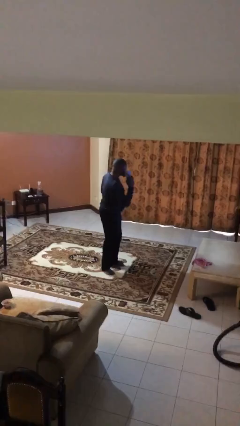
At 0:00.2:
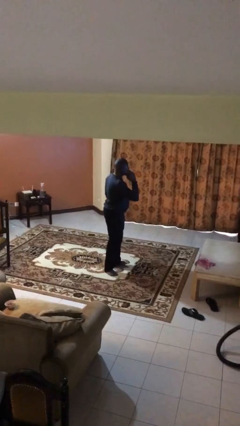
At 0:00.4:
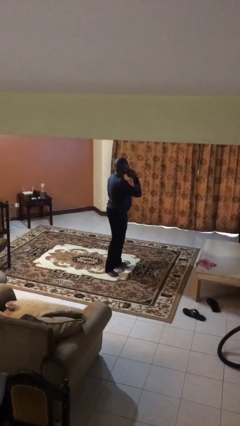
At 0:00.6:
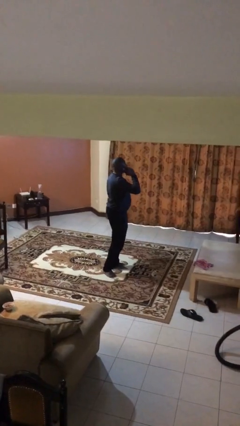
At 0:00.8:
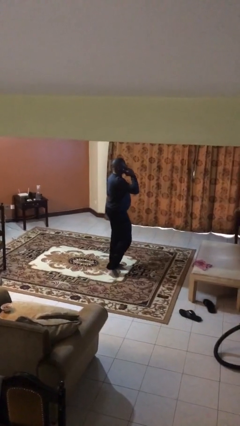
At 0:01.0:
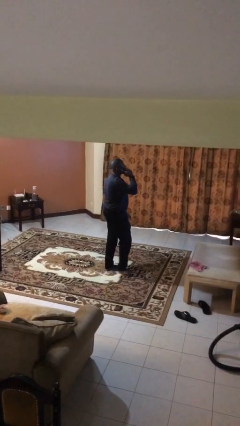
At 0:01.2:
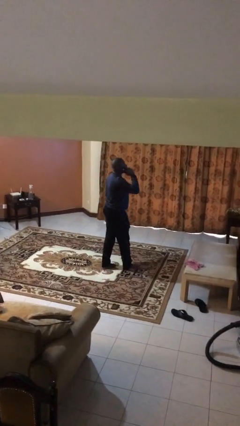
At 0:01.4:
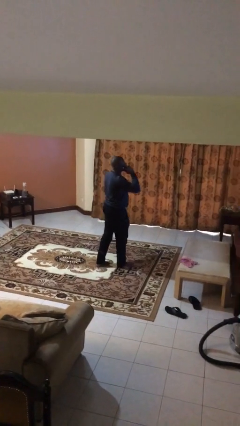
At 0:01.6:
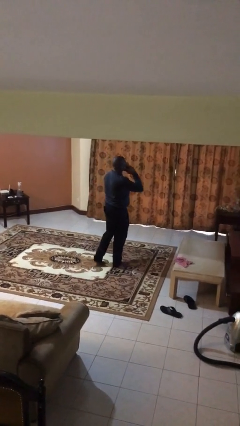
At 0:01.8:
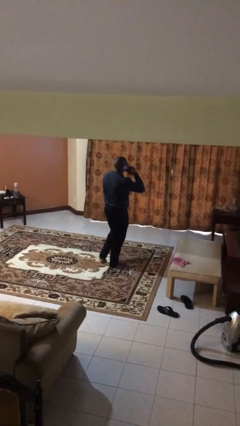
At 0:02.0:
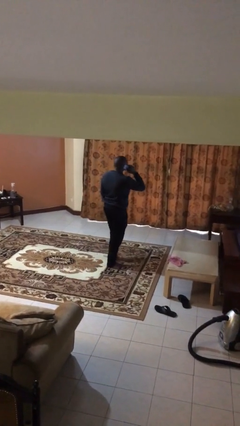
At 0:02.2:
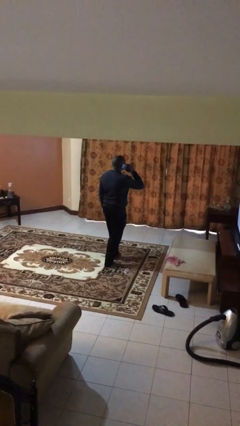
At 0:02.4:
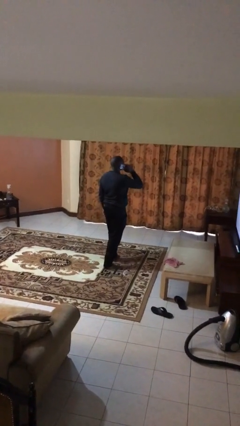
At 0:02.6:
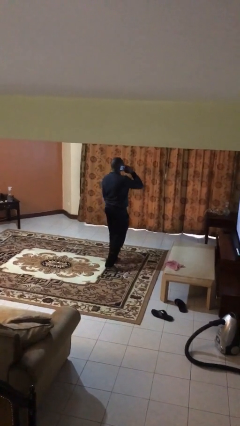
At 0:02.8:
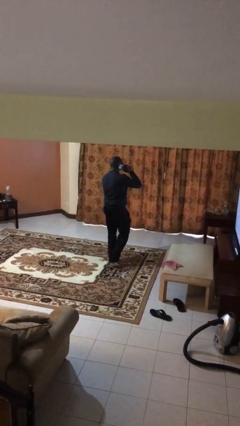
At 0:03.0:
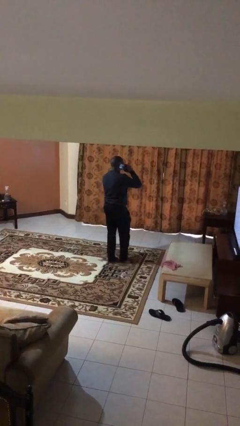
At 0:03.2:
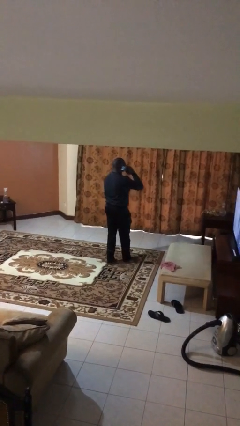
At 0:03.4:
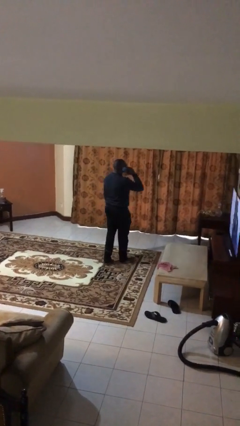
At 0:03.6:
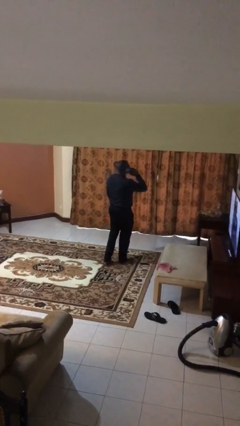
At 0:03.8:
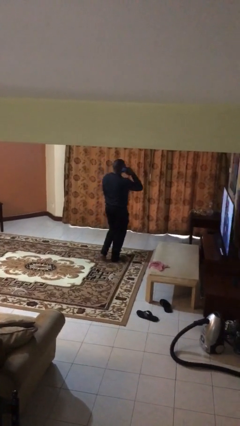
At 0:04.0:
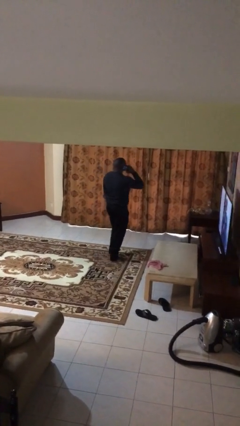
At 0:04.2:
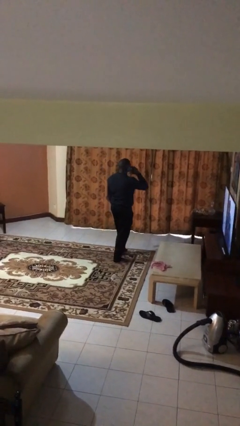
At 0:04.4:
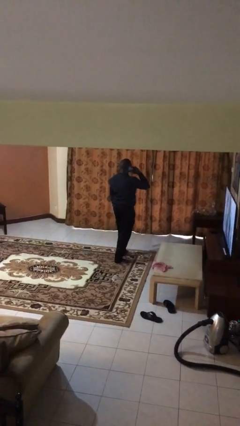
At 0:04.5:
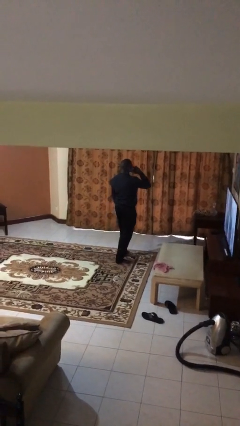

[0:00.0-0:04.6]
person talks on phone

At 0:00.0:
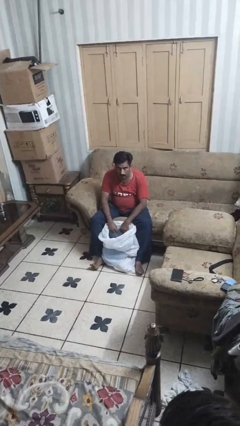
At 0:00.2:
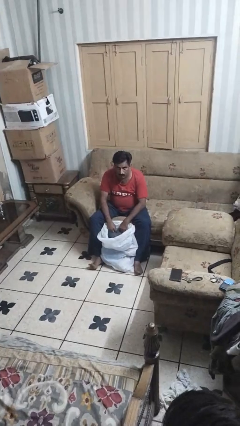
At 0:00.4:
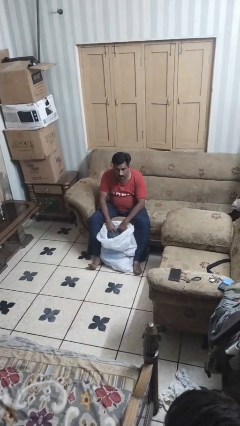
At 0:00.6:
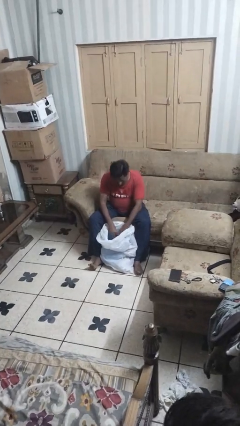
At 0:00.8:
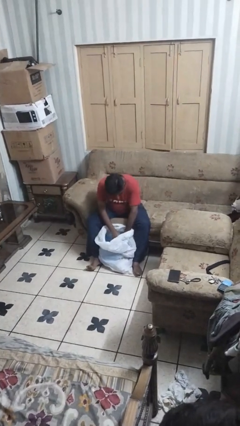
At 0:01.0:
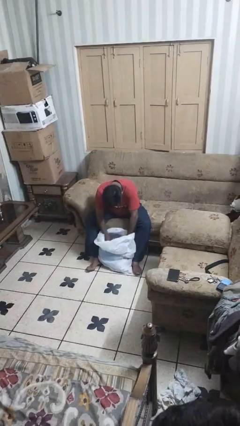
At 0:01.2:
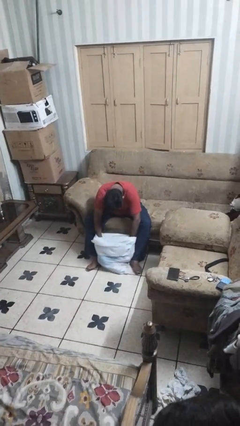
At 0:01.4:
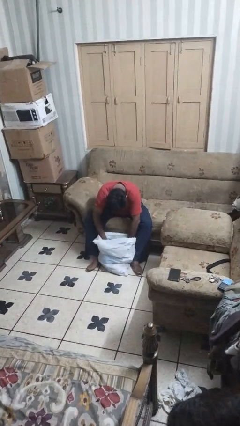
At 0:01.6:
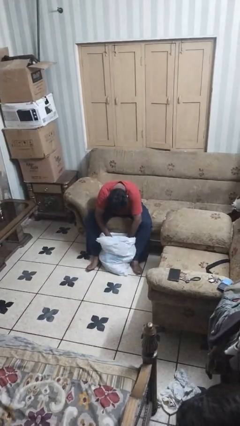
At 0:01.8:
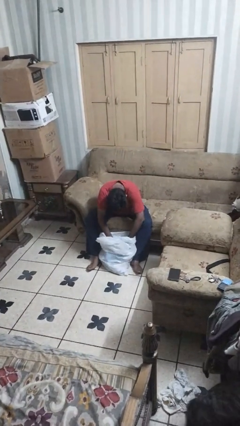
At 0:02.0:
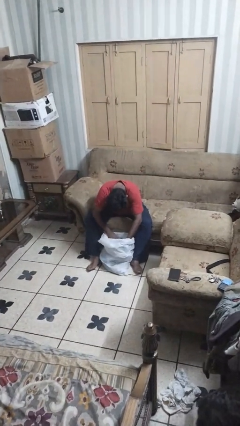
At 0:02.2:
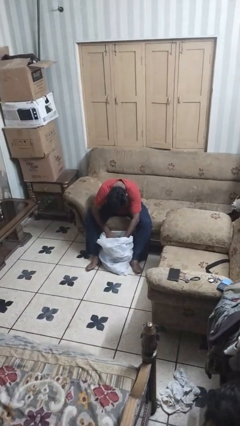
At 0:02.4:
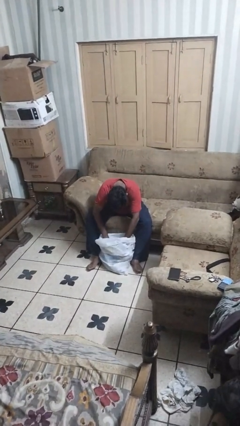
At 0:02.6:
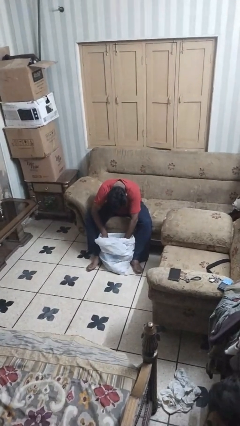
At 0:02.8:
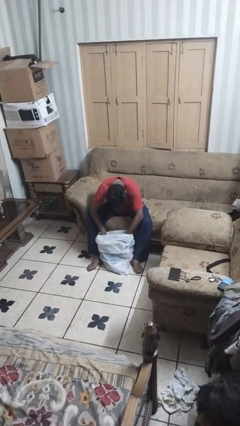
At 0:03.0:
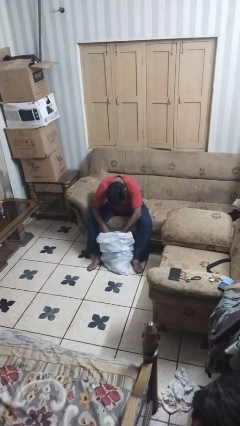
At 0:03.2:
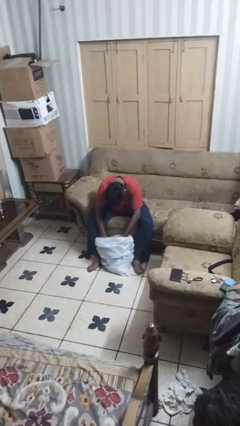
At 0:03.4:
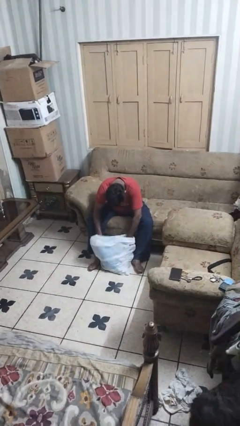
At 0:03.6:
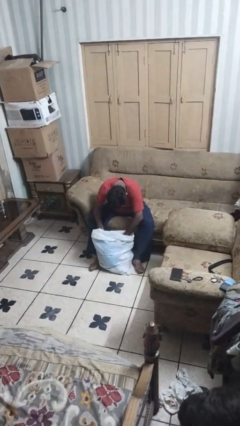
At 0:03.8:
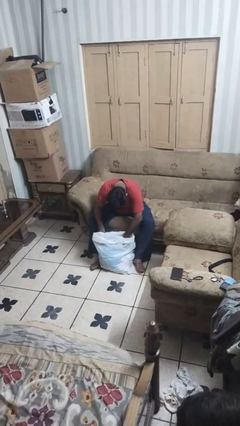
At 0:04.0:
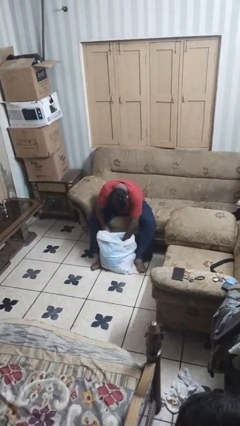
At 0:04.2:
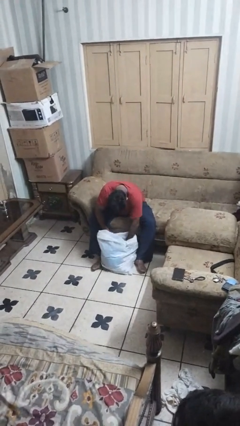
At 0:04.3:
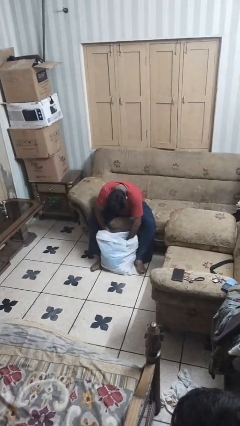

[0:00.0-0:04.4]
person searches in bag

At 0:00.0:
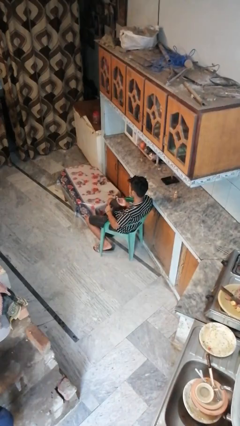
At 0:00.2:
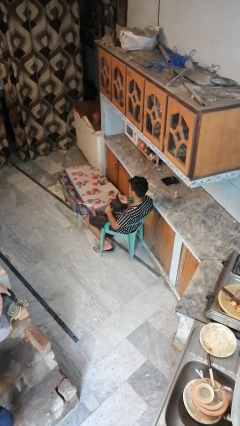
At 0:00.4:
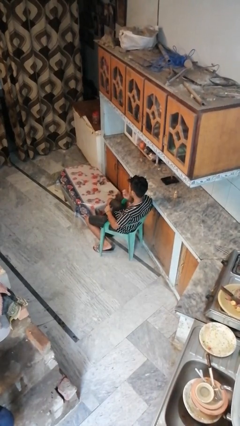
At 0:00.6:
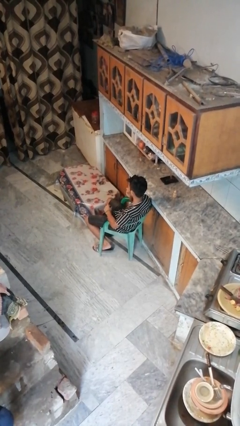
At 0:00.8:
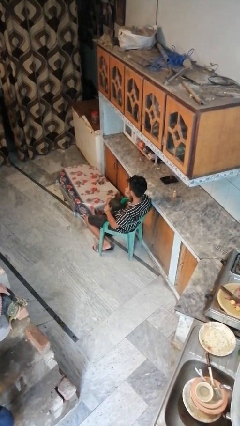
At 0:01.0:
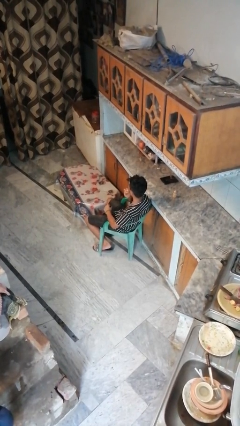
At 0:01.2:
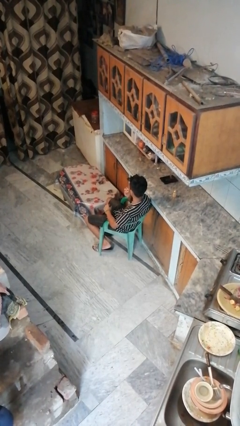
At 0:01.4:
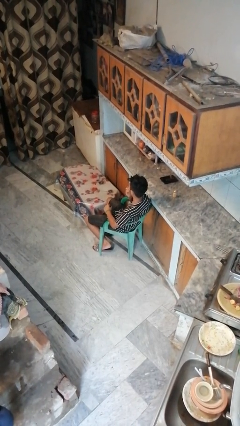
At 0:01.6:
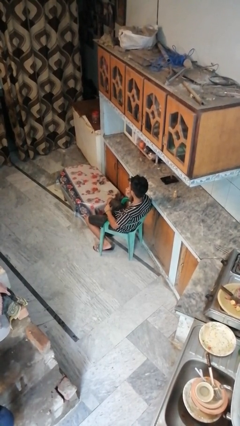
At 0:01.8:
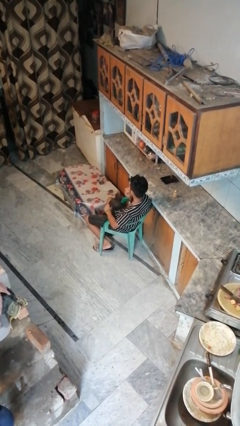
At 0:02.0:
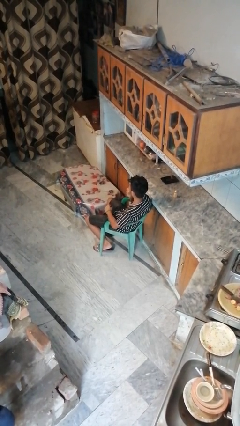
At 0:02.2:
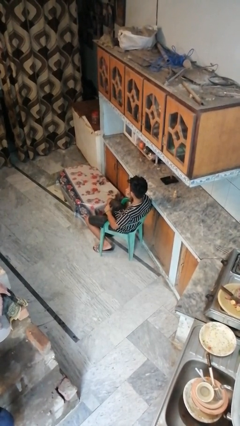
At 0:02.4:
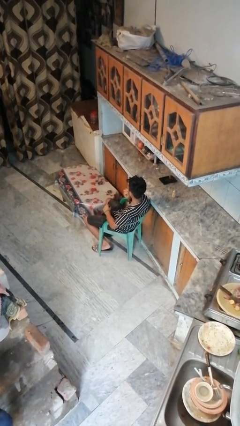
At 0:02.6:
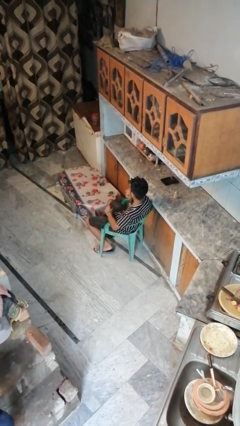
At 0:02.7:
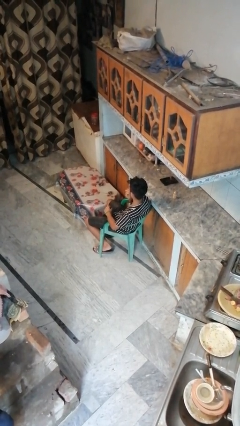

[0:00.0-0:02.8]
person applies lip makeup

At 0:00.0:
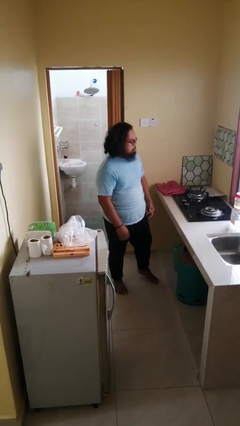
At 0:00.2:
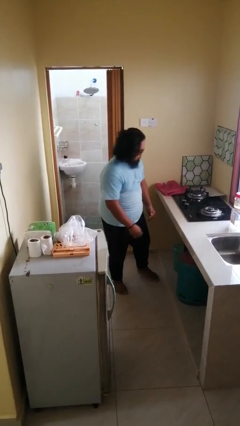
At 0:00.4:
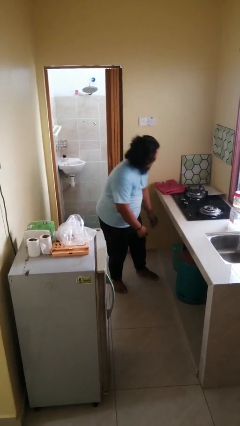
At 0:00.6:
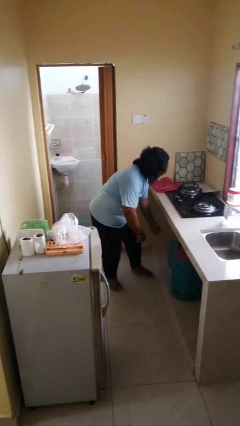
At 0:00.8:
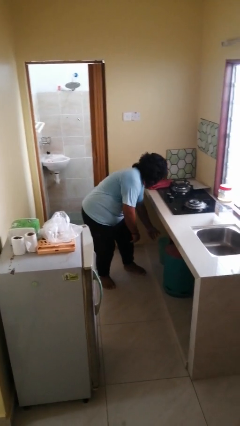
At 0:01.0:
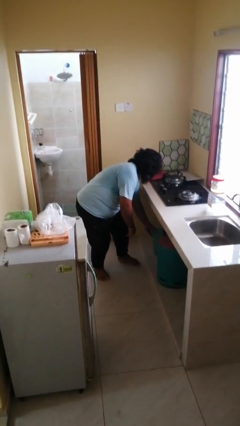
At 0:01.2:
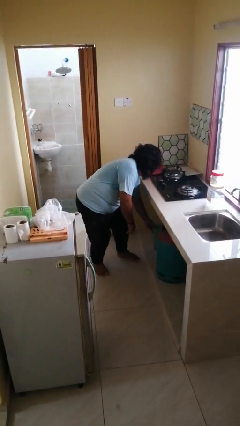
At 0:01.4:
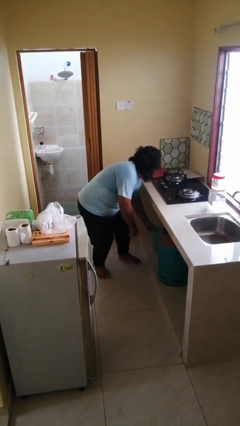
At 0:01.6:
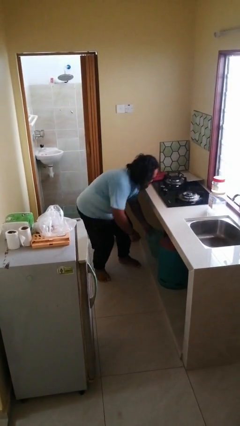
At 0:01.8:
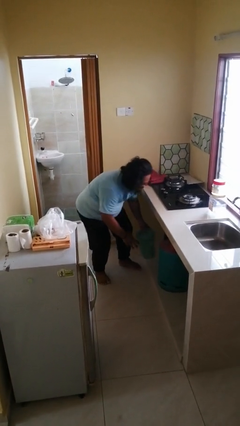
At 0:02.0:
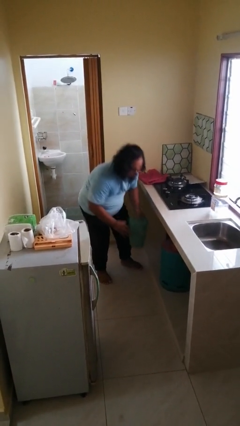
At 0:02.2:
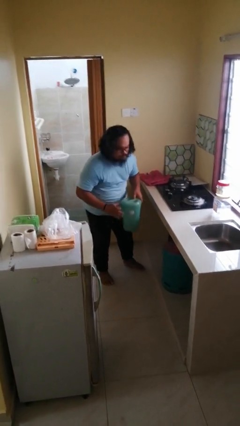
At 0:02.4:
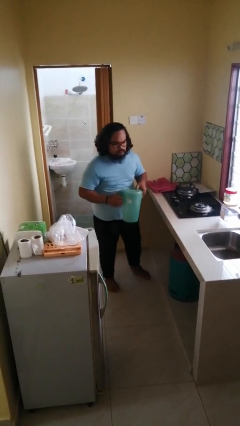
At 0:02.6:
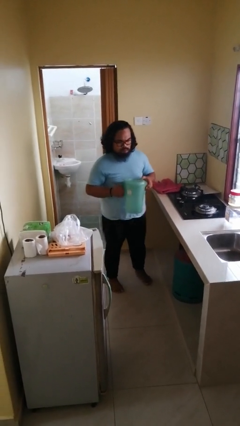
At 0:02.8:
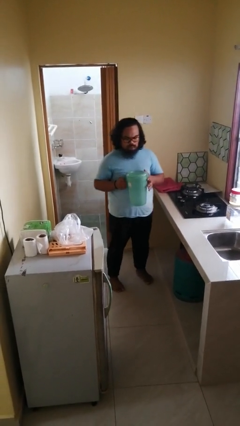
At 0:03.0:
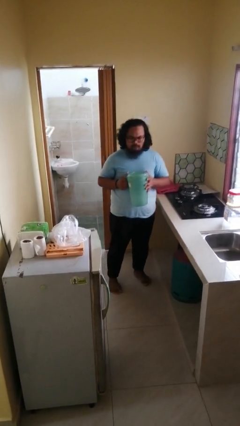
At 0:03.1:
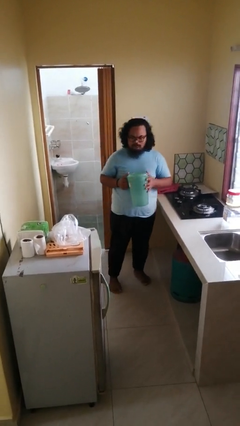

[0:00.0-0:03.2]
person picks up object from cabinet

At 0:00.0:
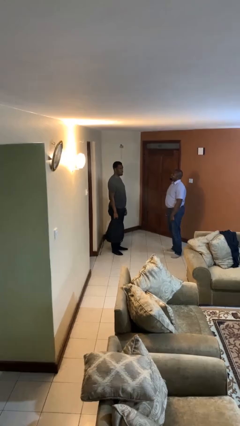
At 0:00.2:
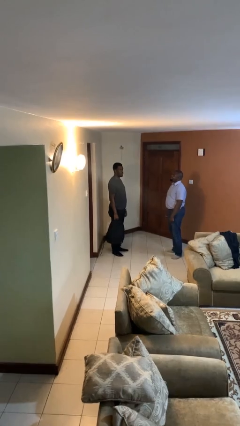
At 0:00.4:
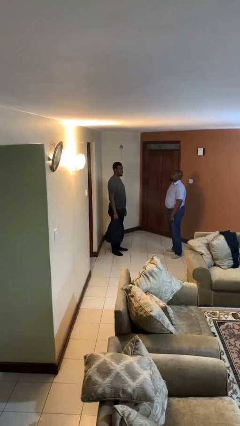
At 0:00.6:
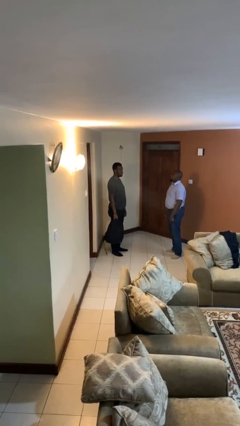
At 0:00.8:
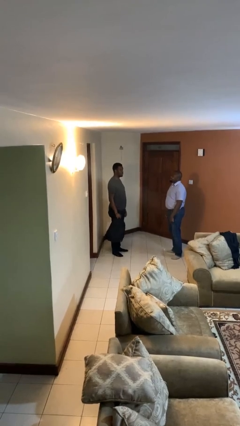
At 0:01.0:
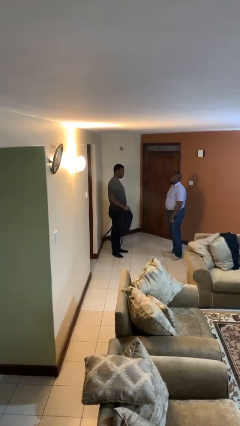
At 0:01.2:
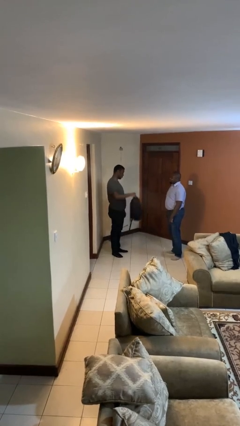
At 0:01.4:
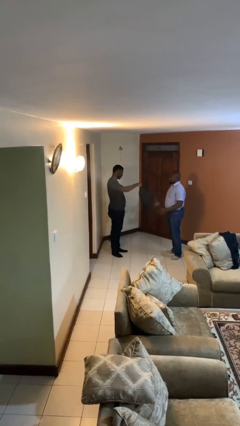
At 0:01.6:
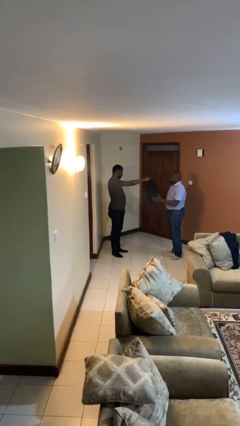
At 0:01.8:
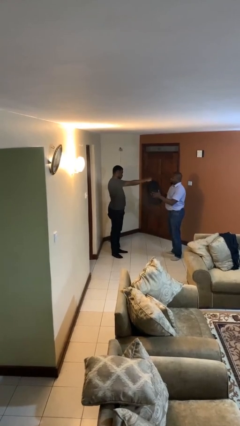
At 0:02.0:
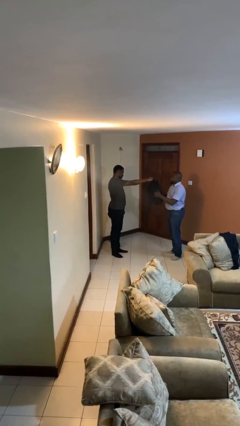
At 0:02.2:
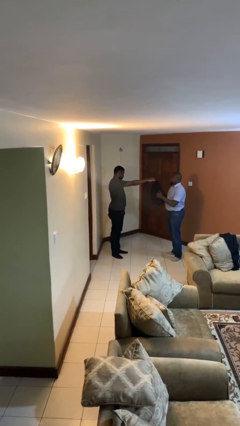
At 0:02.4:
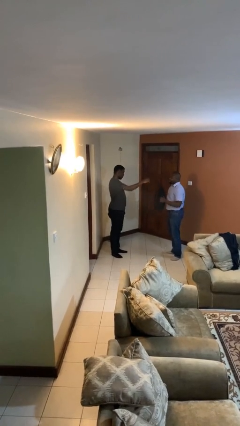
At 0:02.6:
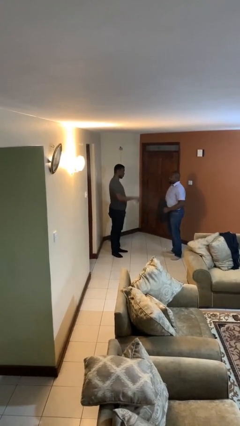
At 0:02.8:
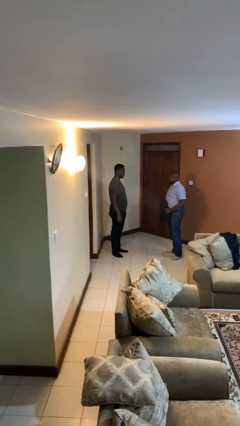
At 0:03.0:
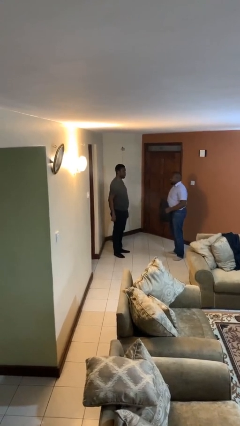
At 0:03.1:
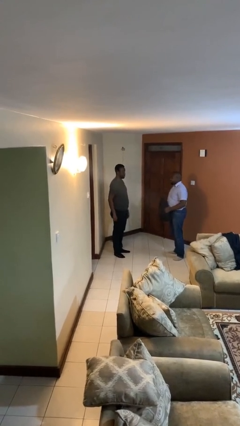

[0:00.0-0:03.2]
person transfers object to person
